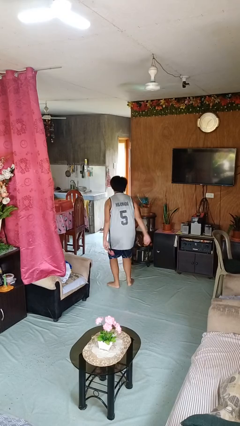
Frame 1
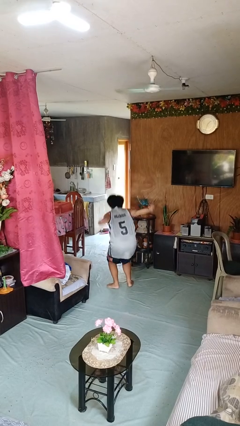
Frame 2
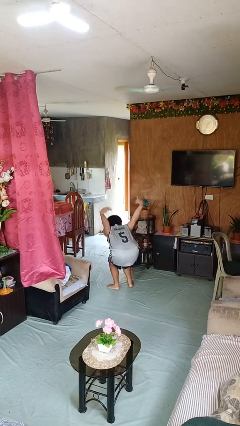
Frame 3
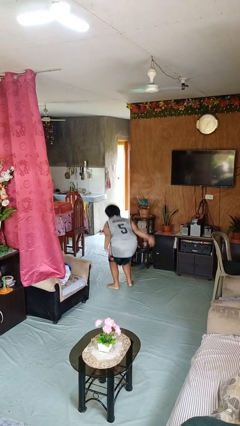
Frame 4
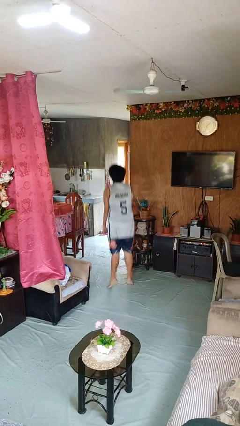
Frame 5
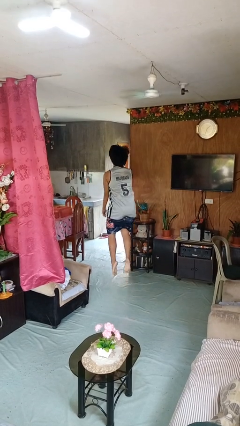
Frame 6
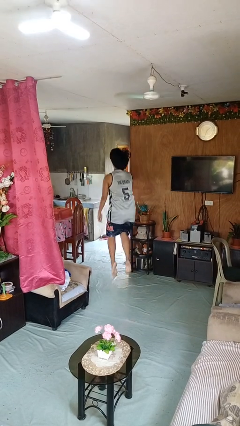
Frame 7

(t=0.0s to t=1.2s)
person jumps

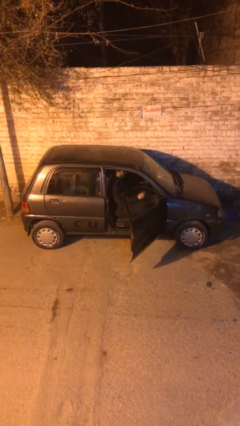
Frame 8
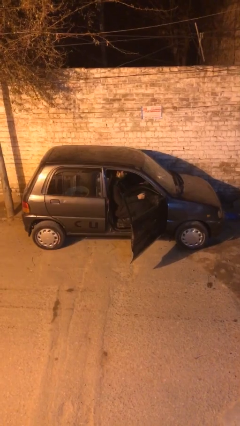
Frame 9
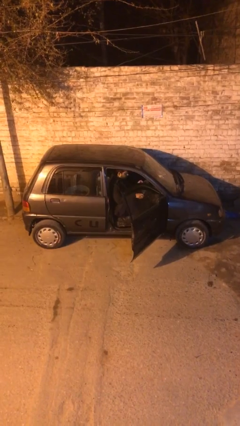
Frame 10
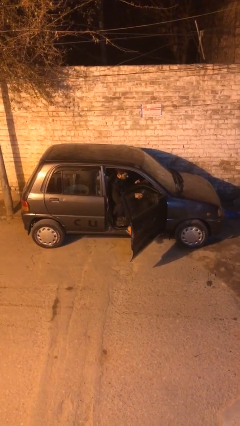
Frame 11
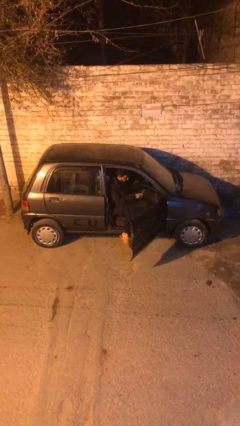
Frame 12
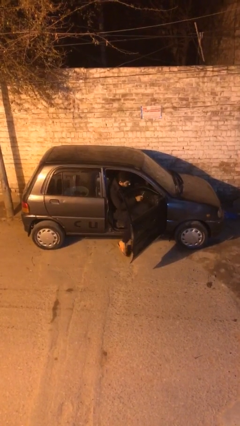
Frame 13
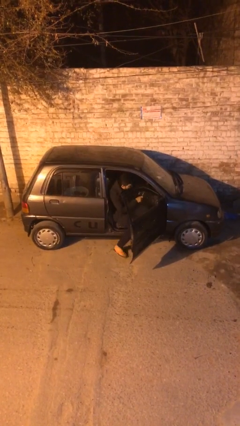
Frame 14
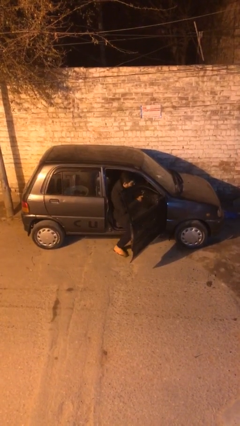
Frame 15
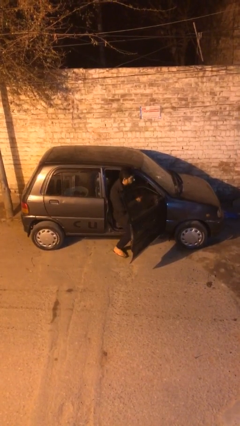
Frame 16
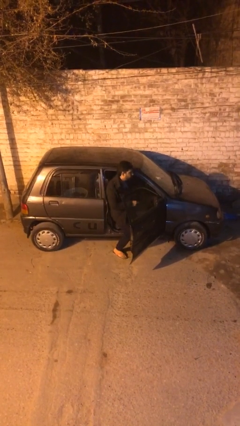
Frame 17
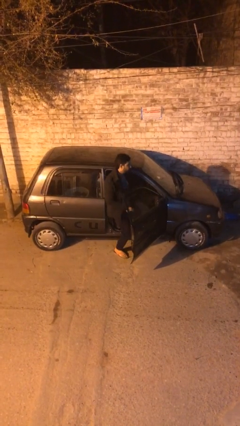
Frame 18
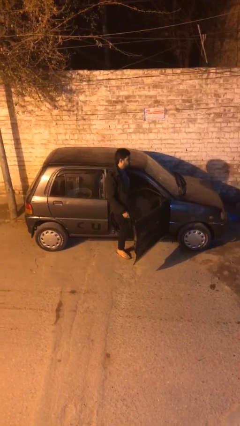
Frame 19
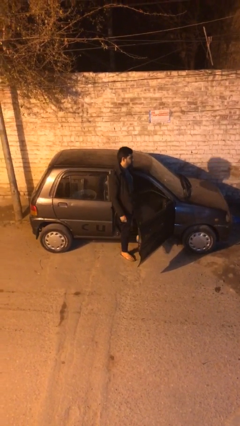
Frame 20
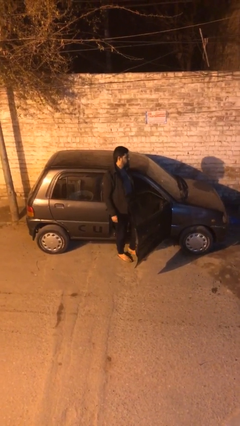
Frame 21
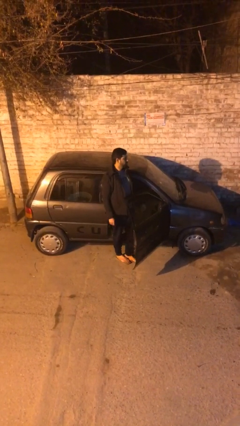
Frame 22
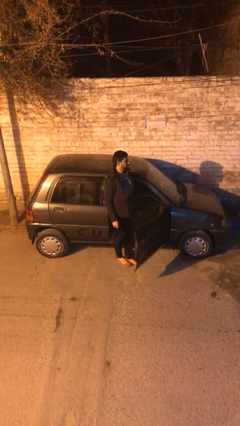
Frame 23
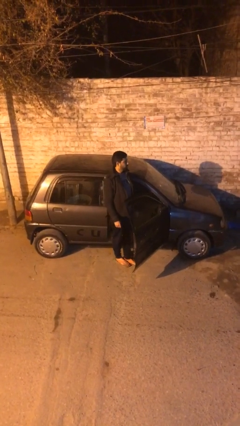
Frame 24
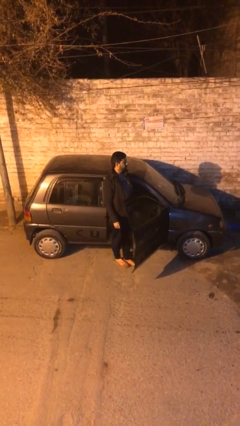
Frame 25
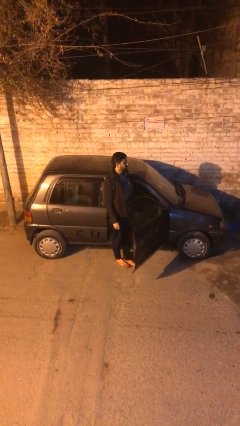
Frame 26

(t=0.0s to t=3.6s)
person exits car

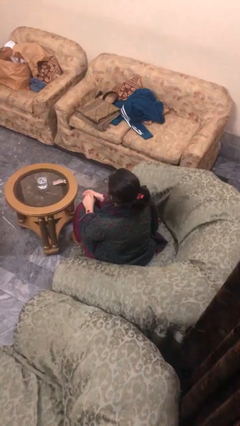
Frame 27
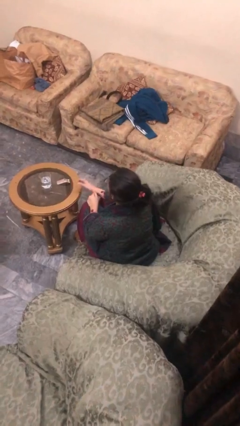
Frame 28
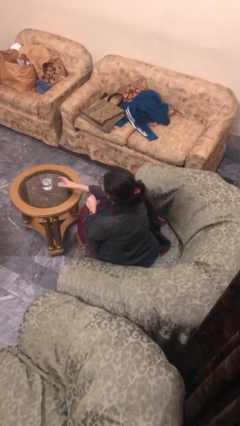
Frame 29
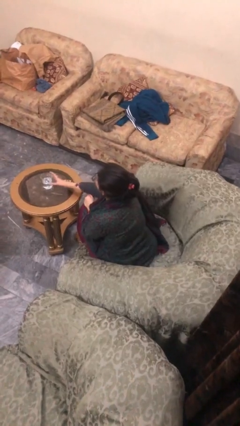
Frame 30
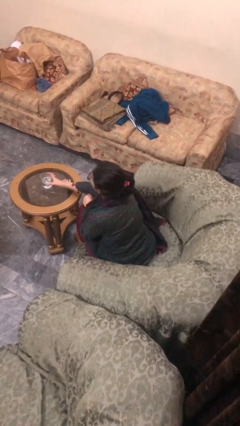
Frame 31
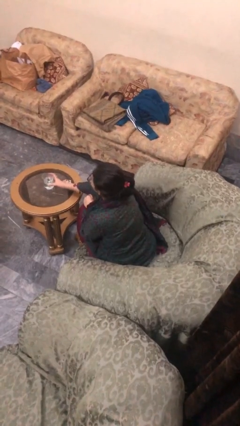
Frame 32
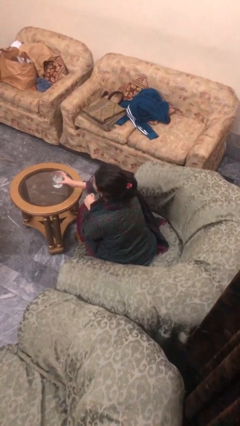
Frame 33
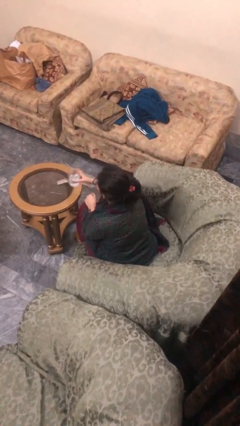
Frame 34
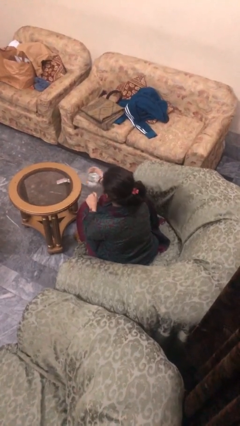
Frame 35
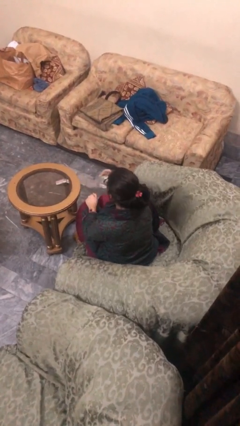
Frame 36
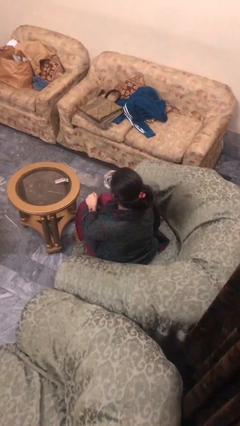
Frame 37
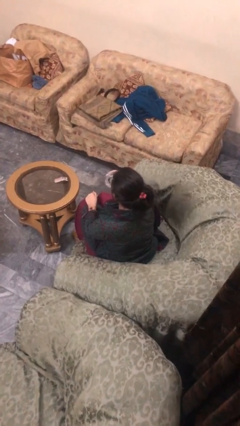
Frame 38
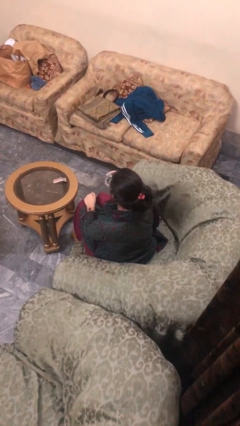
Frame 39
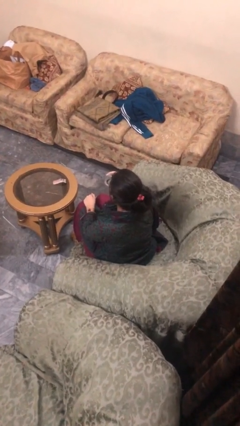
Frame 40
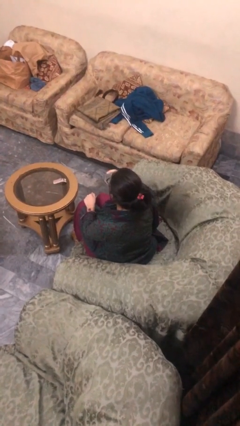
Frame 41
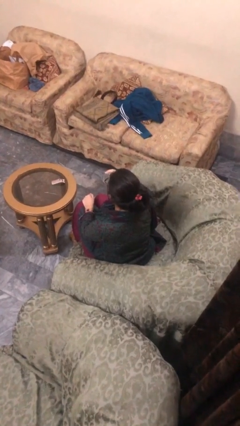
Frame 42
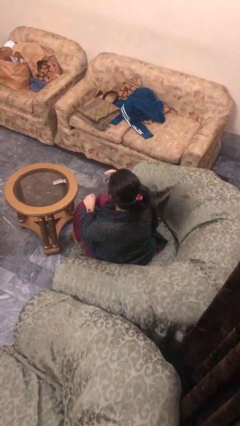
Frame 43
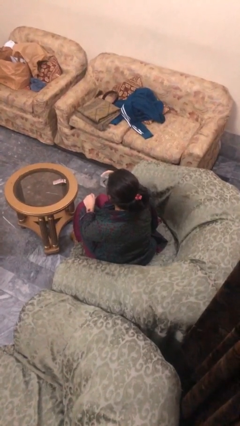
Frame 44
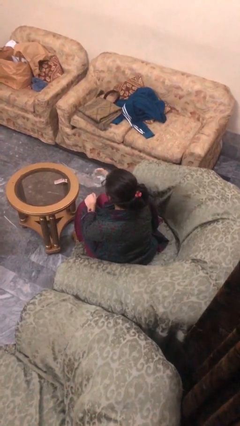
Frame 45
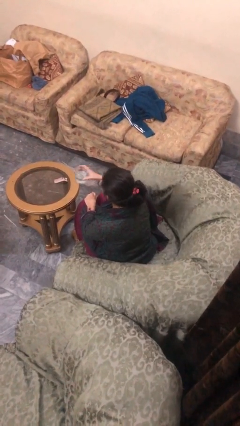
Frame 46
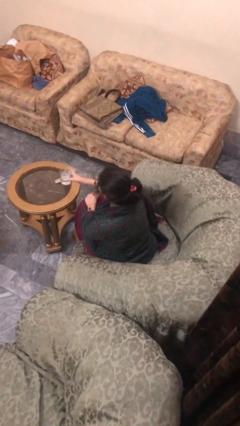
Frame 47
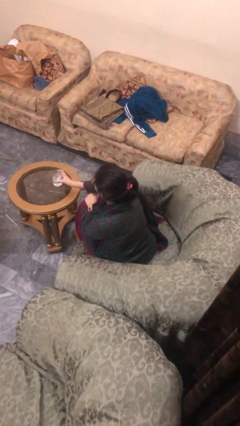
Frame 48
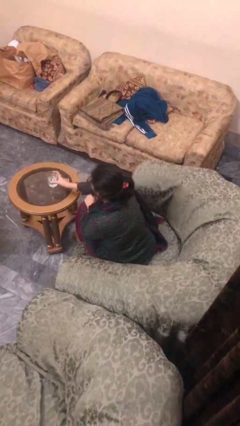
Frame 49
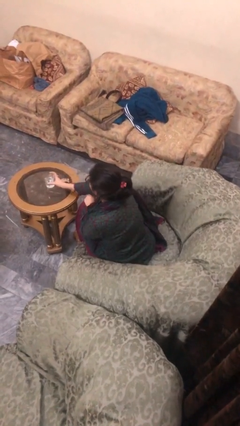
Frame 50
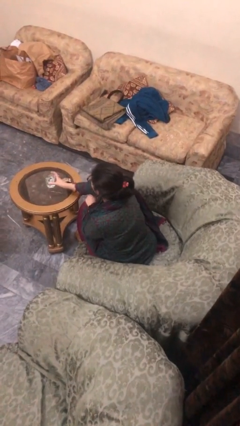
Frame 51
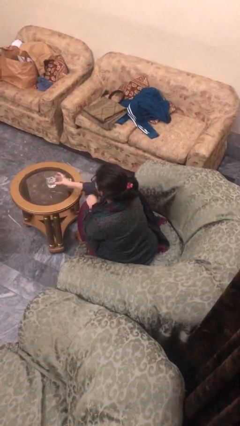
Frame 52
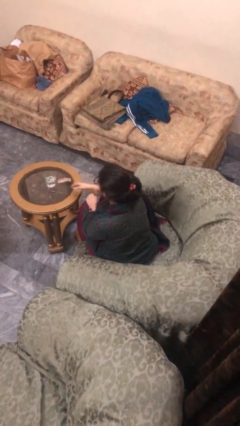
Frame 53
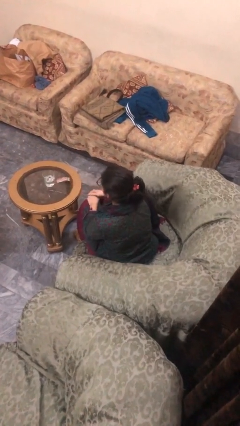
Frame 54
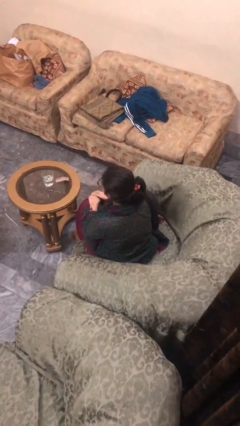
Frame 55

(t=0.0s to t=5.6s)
person drinks from cup

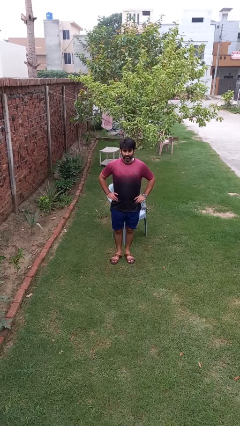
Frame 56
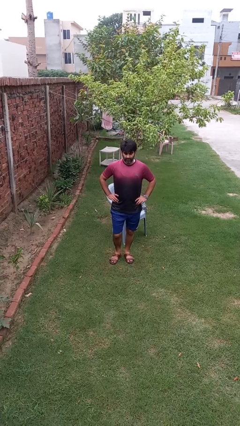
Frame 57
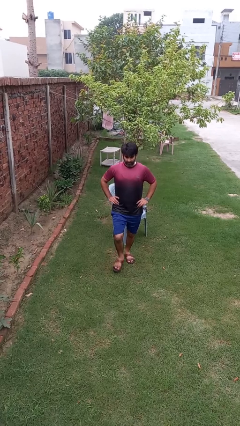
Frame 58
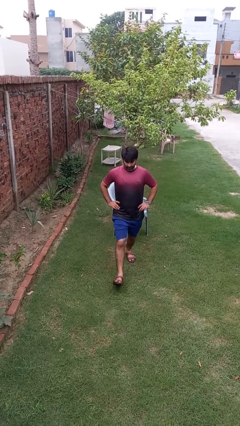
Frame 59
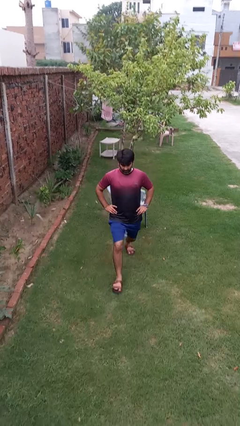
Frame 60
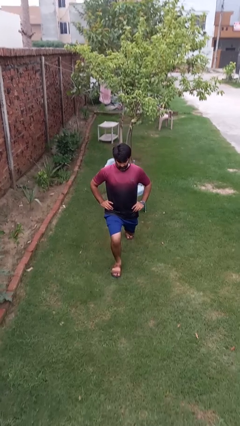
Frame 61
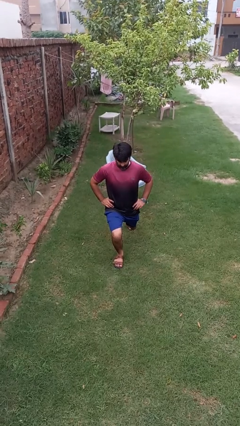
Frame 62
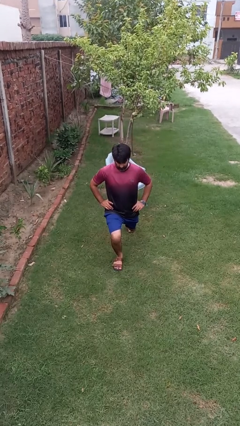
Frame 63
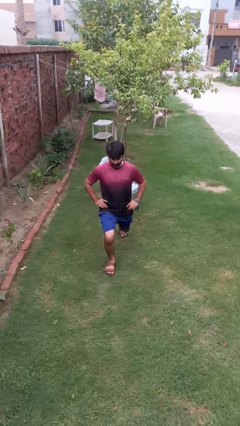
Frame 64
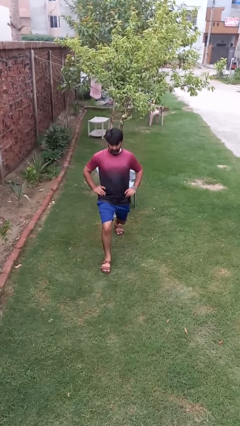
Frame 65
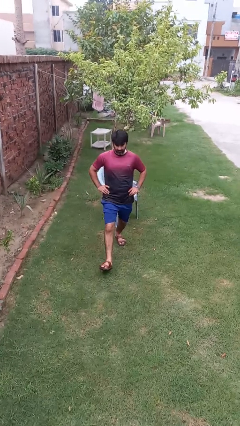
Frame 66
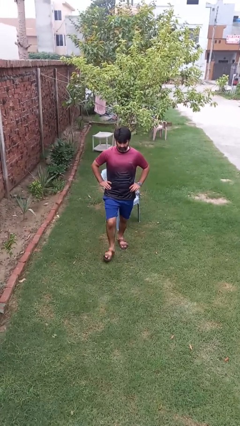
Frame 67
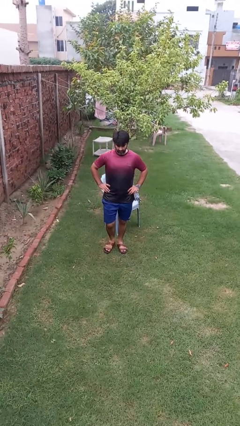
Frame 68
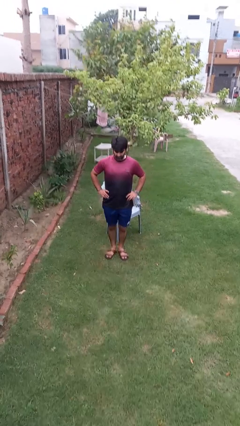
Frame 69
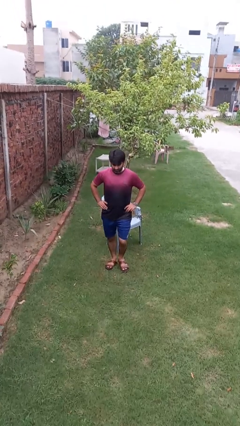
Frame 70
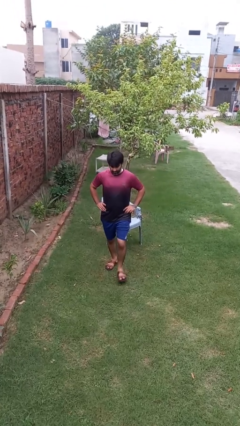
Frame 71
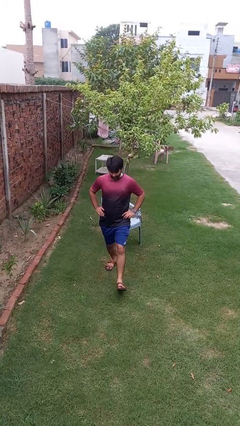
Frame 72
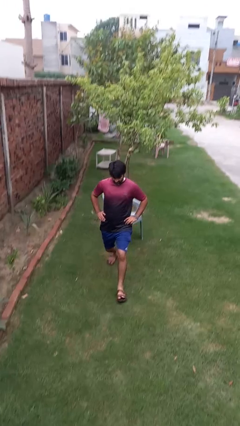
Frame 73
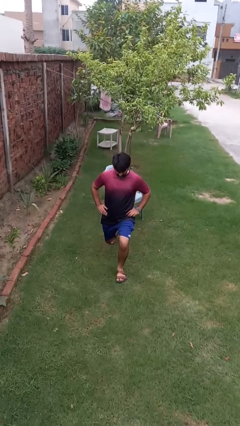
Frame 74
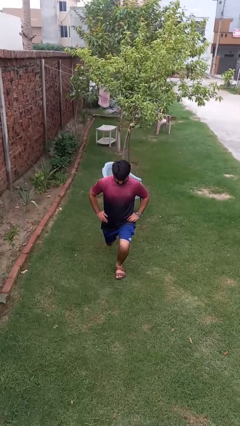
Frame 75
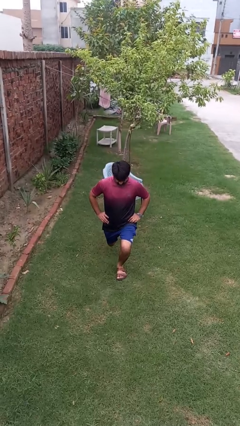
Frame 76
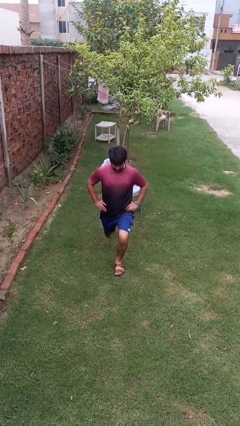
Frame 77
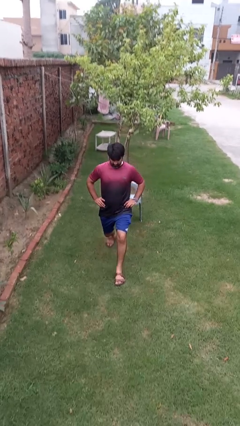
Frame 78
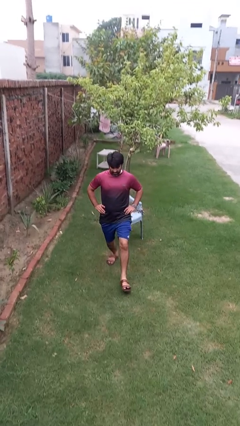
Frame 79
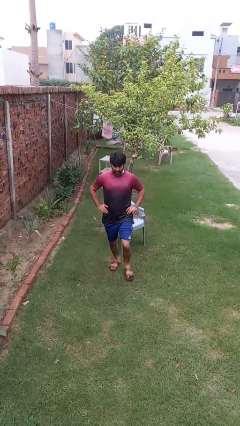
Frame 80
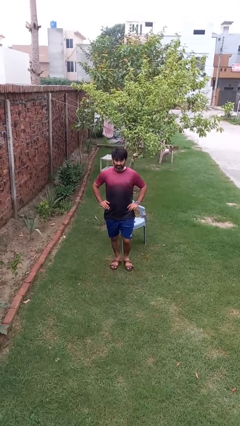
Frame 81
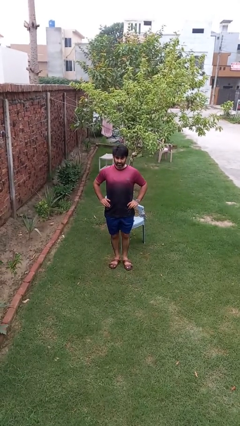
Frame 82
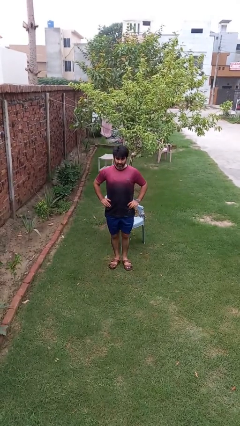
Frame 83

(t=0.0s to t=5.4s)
person exercises with lunges

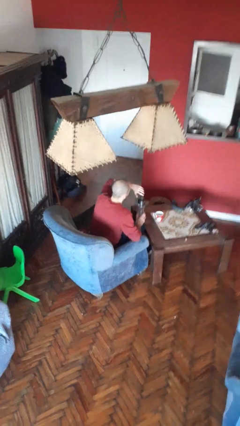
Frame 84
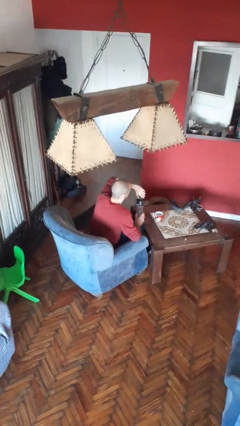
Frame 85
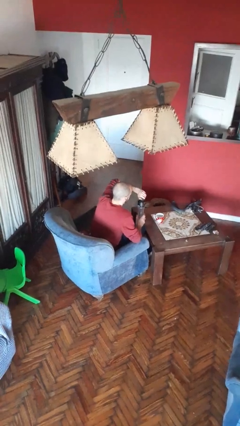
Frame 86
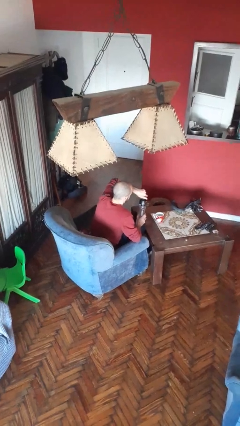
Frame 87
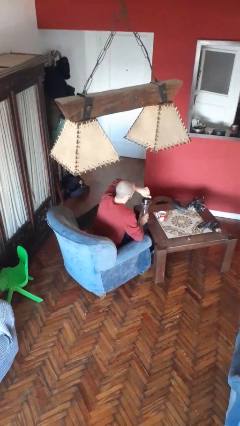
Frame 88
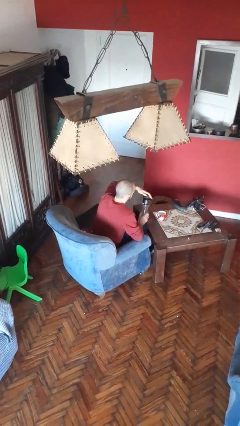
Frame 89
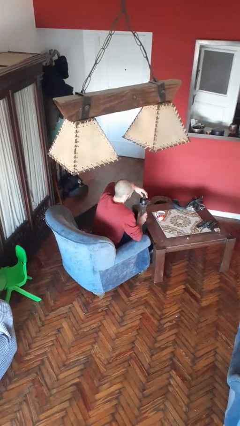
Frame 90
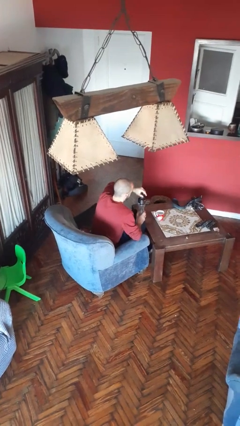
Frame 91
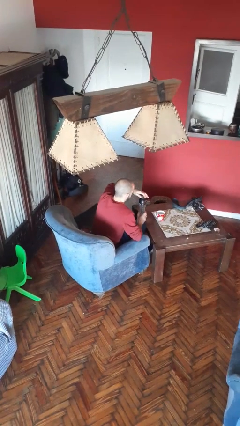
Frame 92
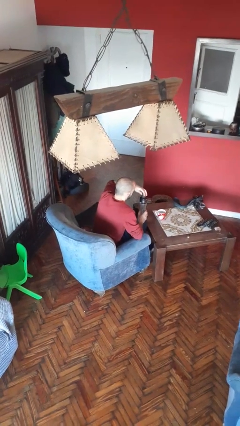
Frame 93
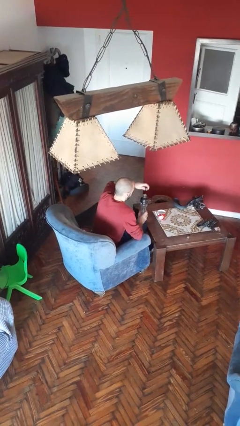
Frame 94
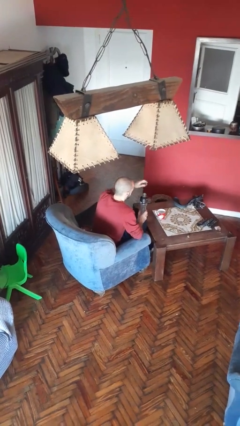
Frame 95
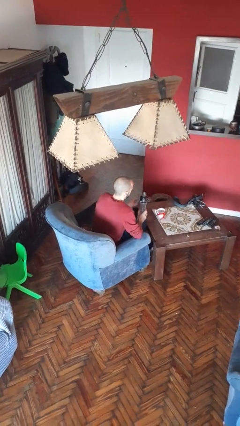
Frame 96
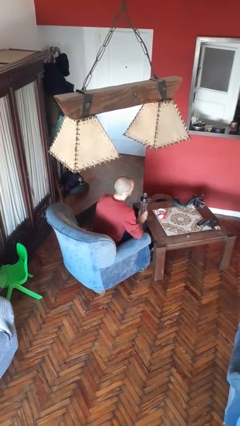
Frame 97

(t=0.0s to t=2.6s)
person unscrews lid from bottle
